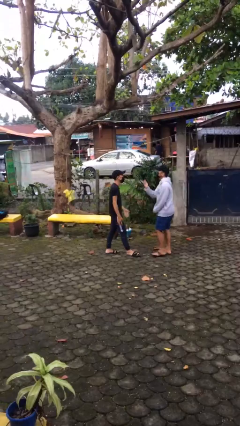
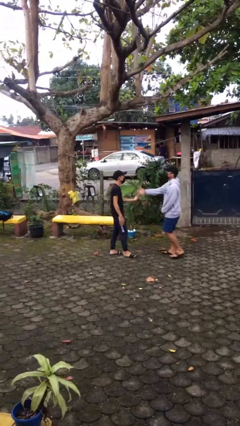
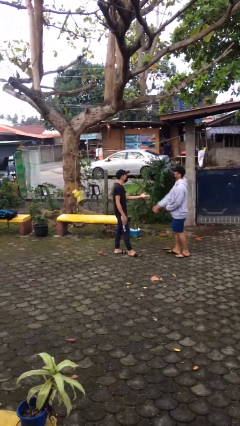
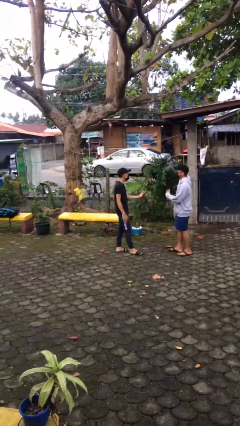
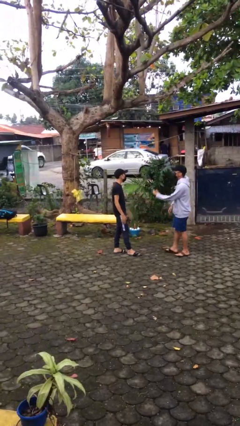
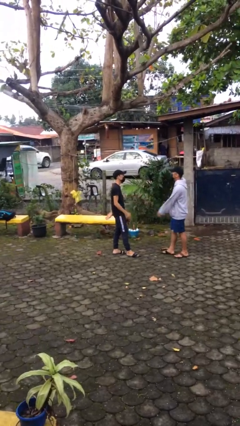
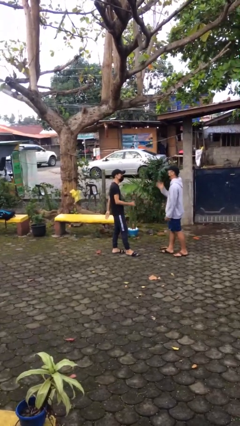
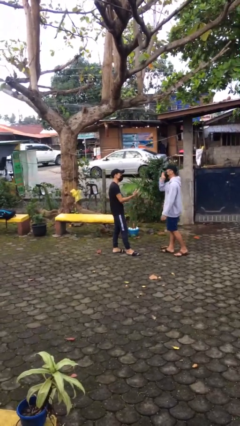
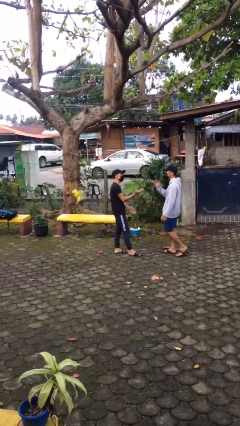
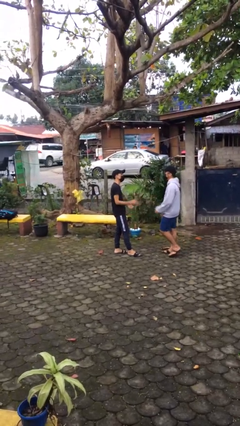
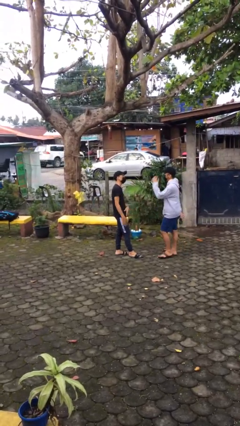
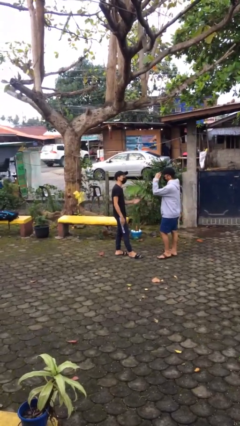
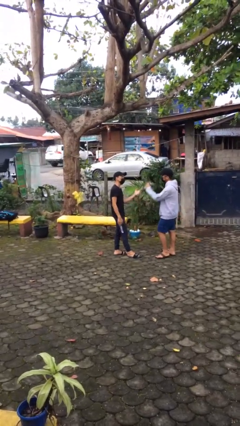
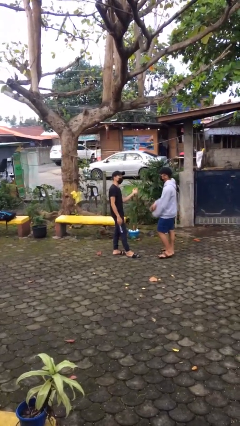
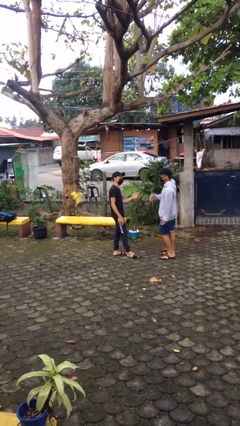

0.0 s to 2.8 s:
person talks to person

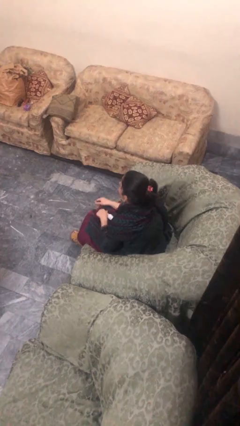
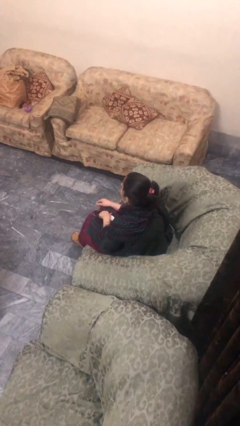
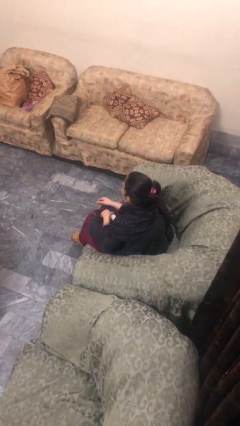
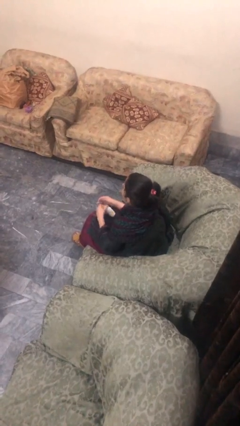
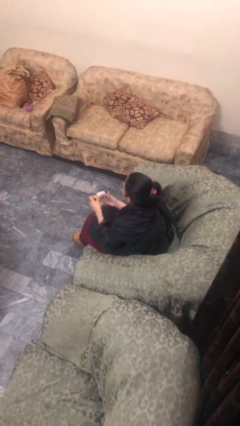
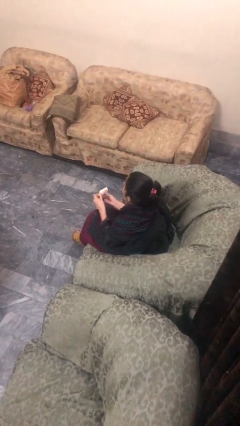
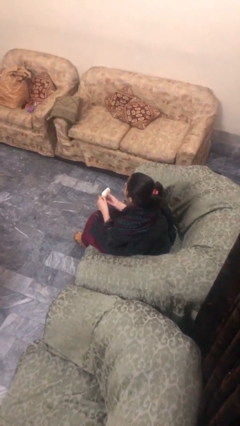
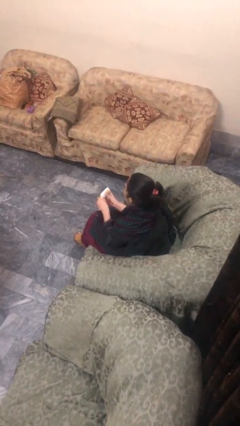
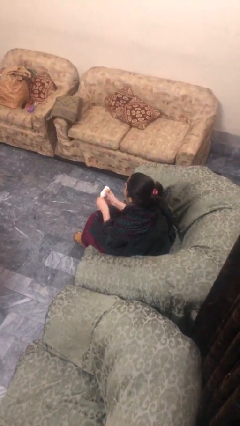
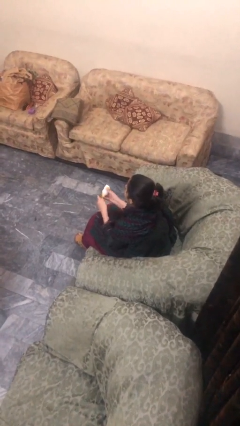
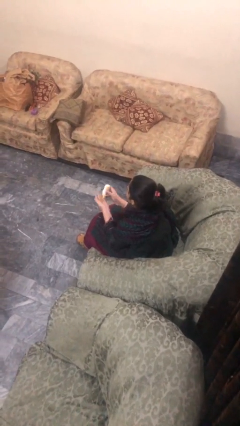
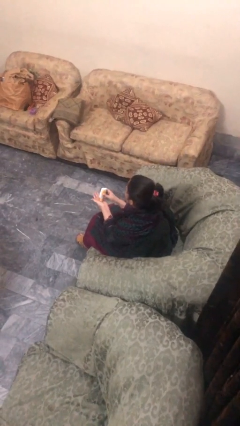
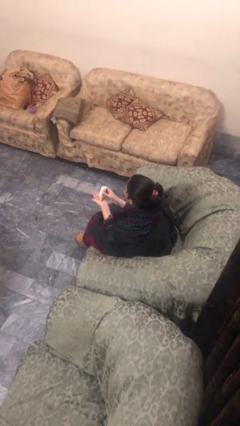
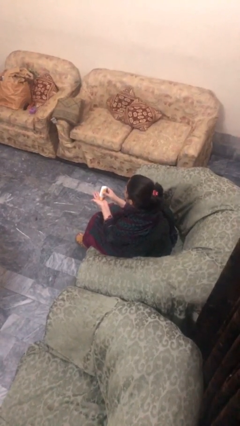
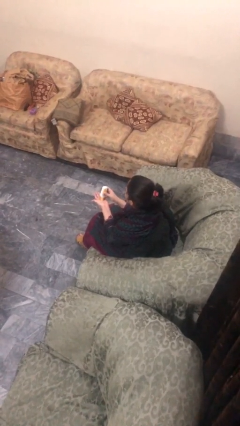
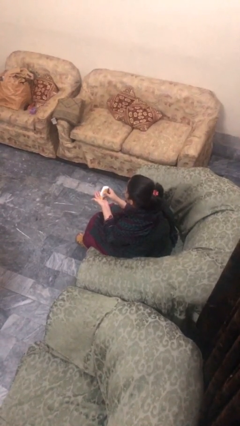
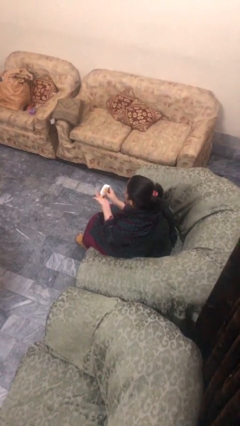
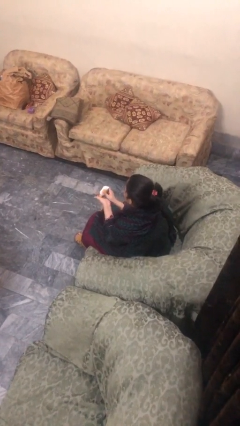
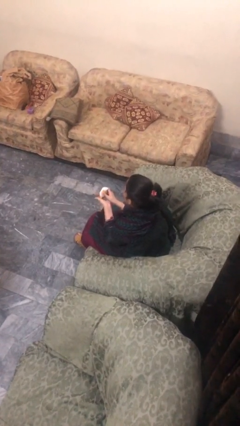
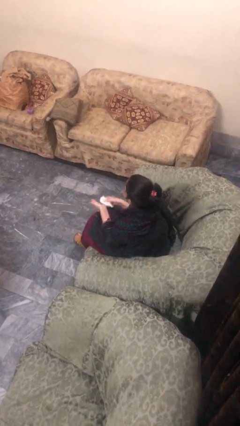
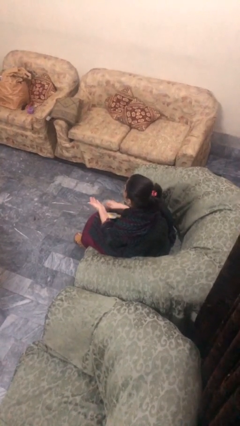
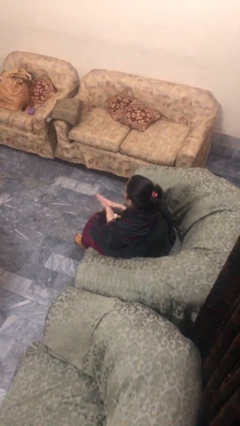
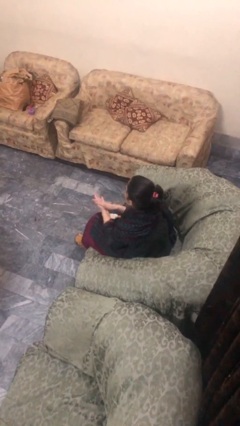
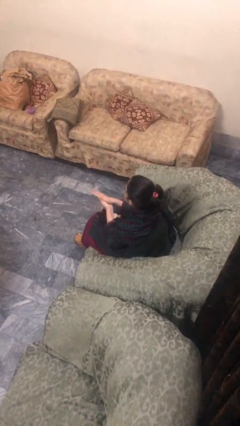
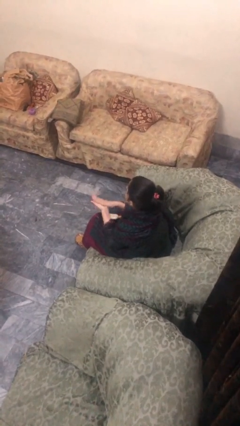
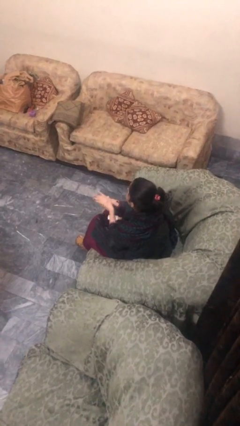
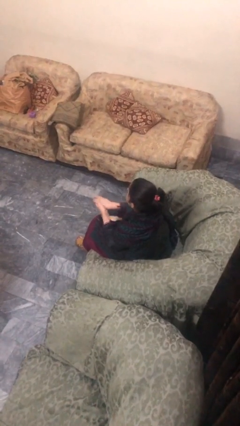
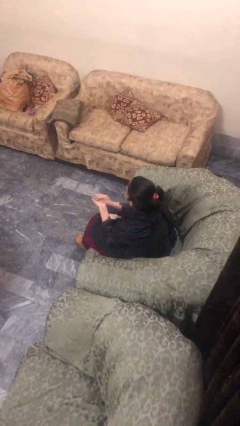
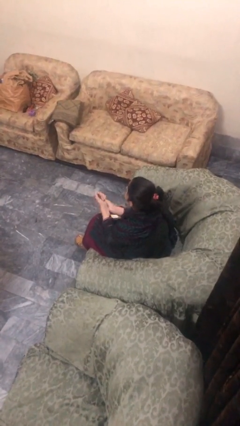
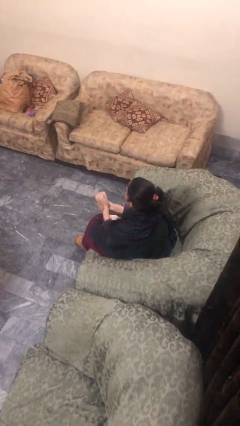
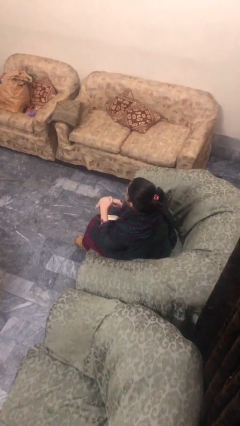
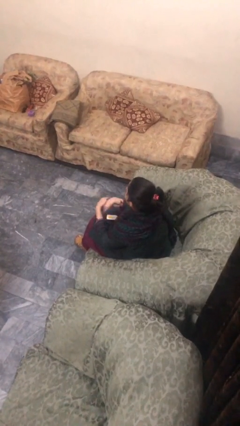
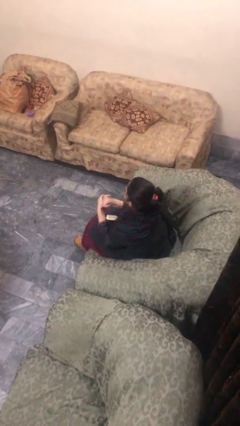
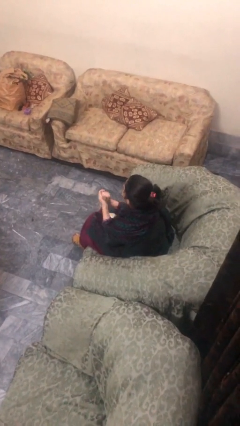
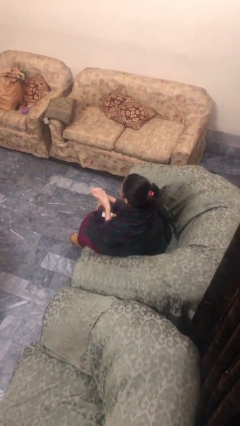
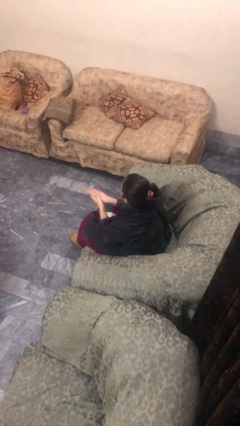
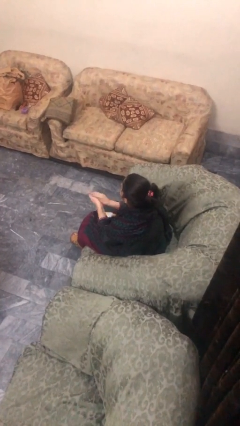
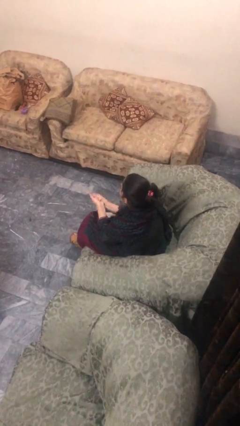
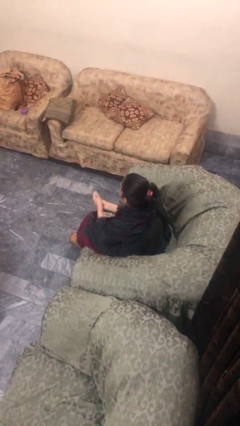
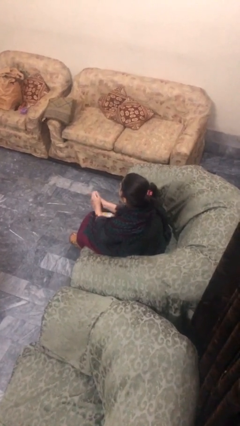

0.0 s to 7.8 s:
person applies sunscreen

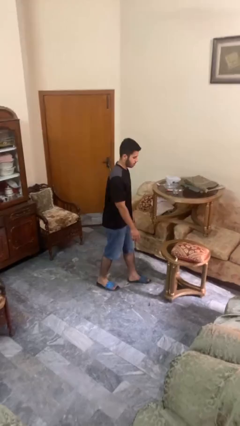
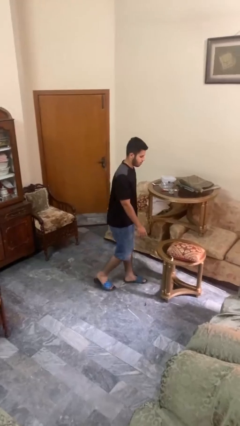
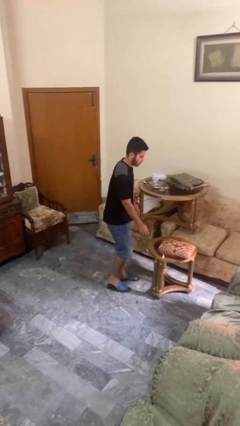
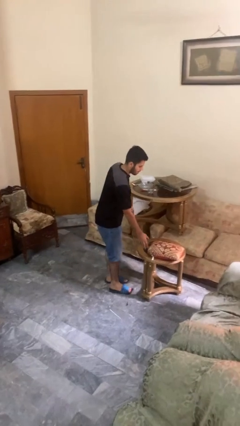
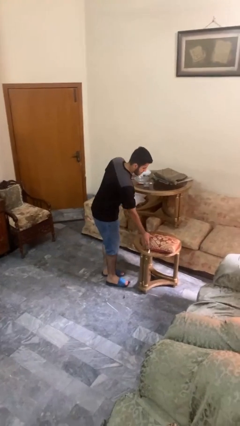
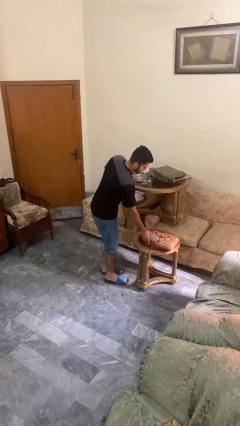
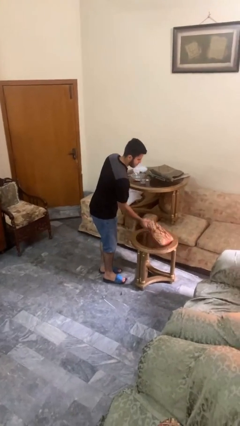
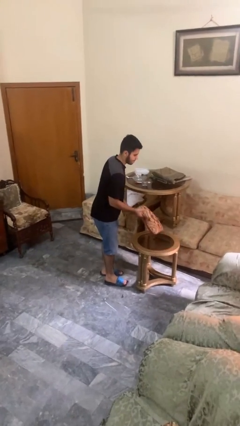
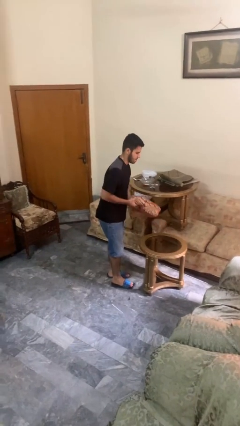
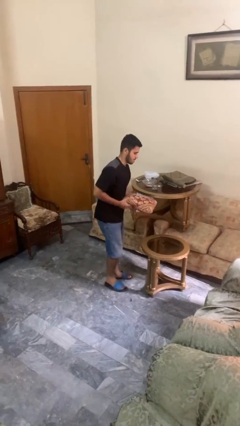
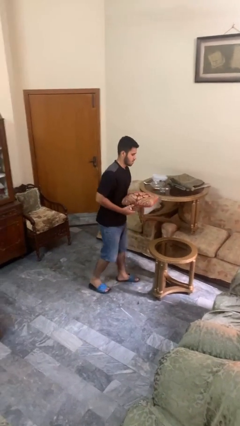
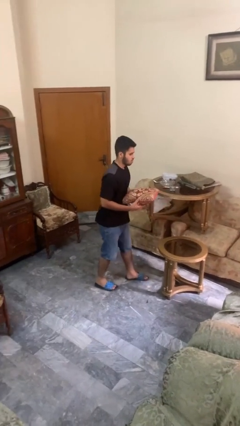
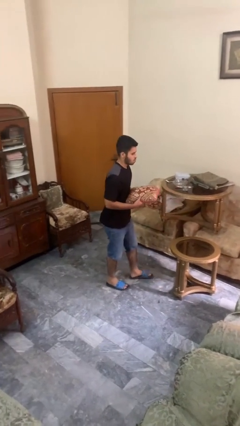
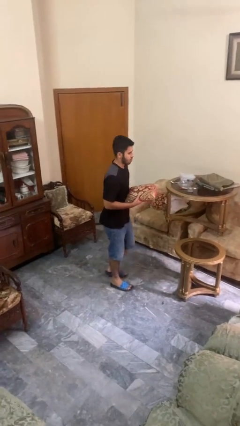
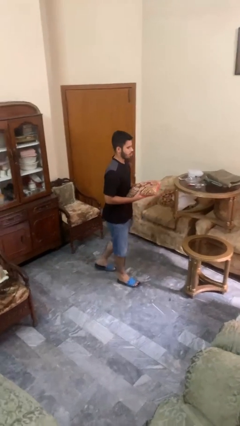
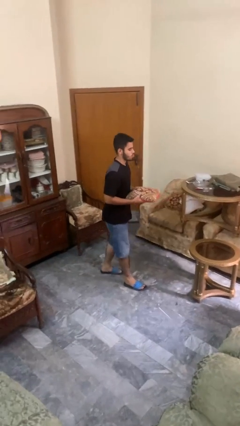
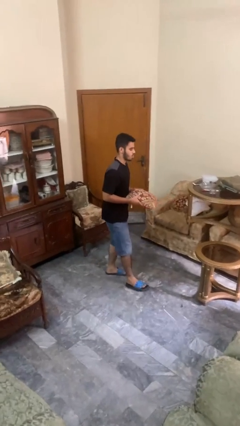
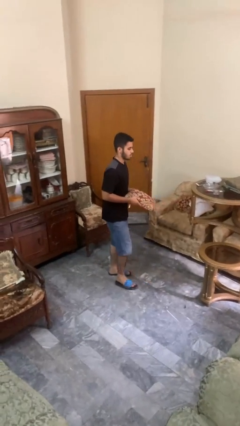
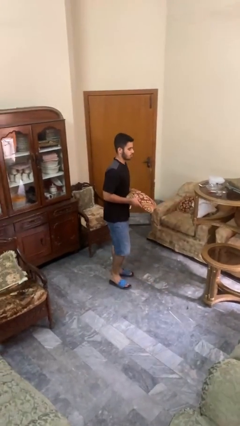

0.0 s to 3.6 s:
person picks up object from table

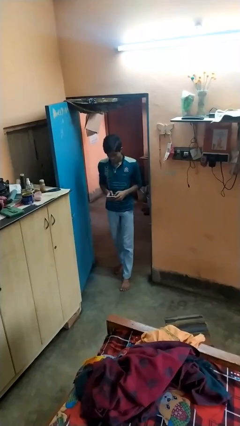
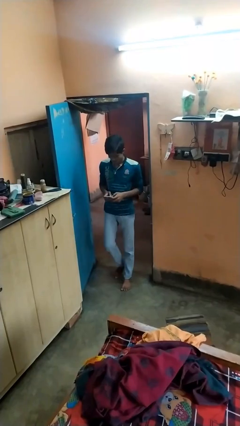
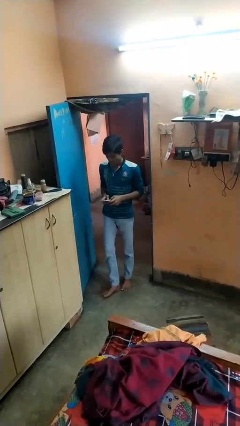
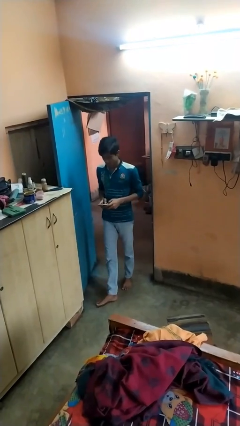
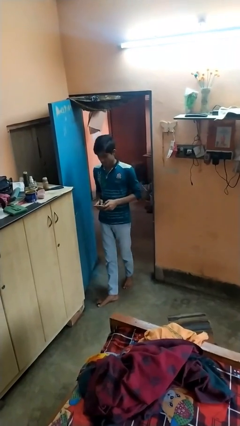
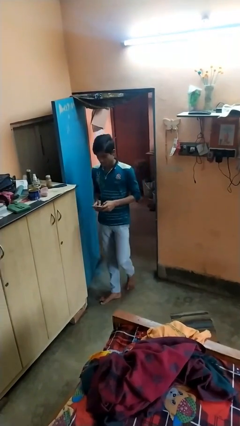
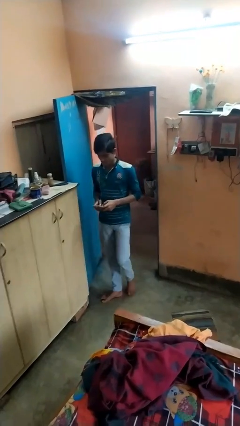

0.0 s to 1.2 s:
person enters scene through structure

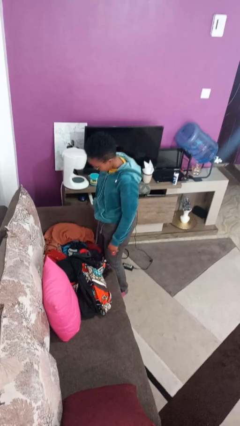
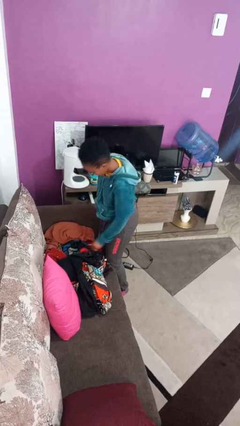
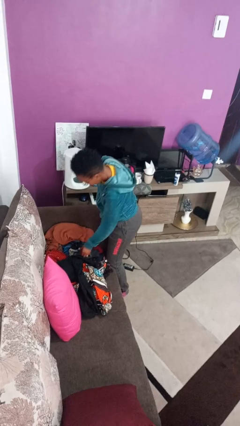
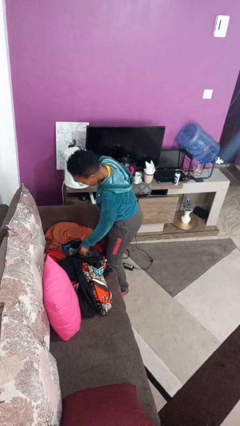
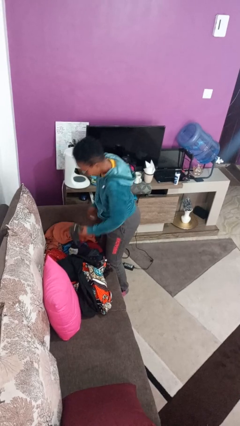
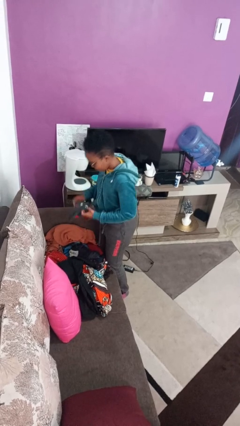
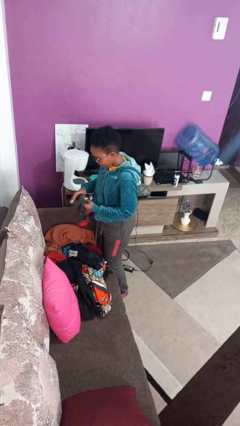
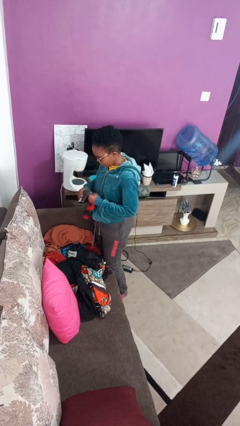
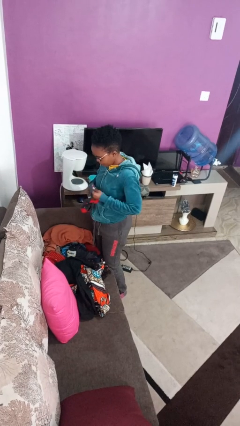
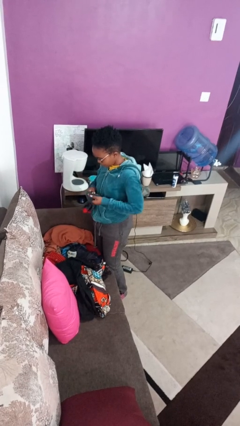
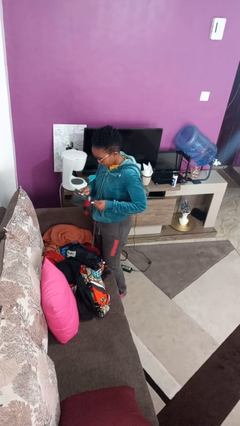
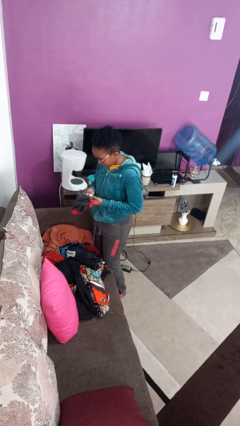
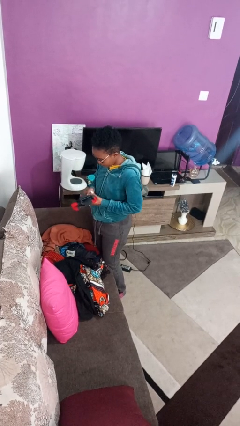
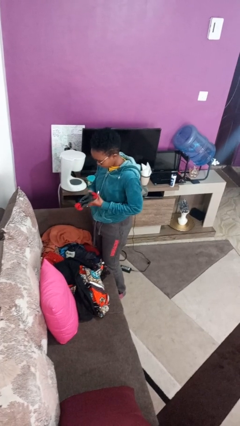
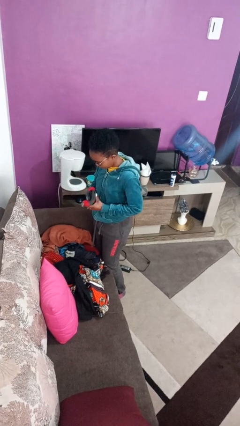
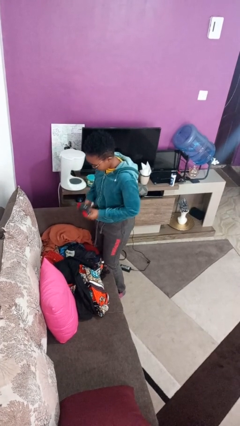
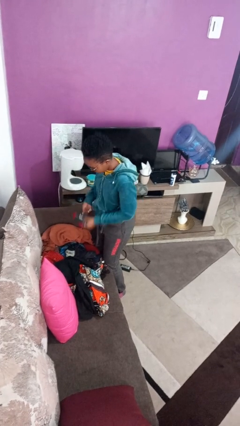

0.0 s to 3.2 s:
person folds socks
